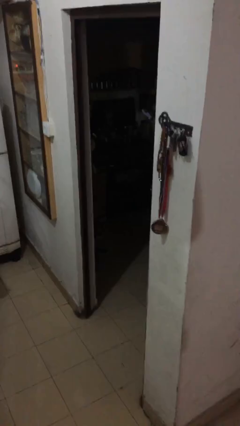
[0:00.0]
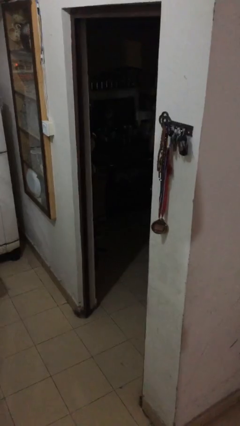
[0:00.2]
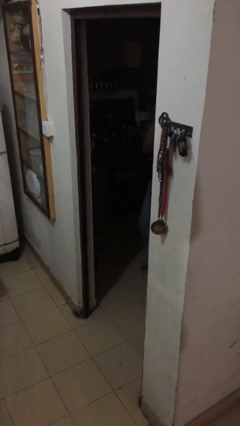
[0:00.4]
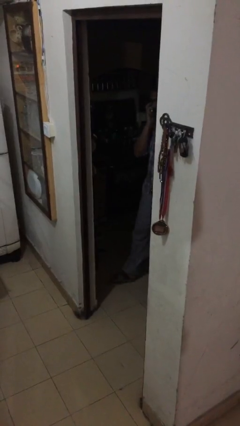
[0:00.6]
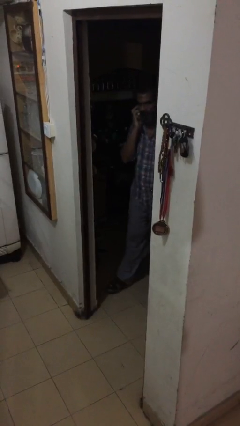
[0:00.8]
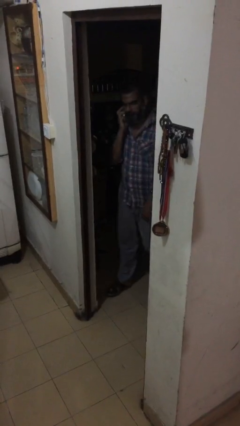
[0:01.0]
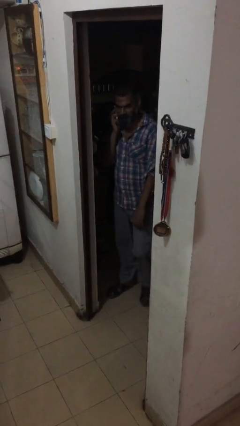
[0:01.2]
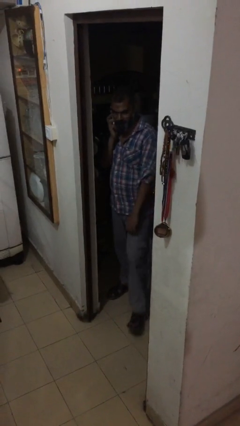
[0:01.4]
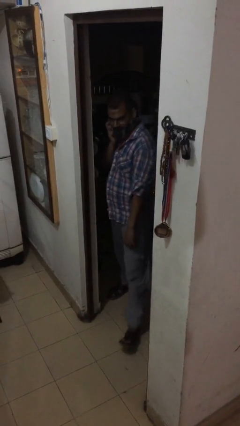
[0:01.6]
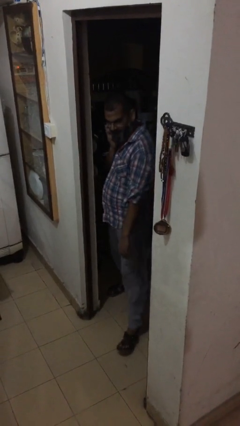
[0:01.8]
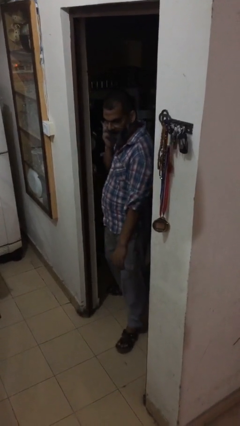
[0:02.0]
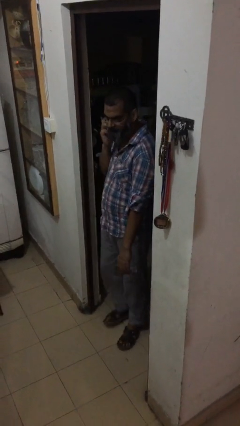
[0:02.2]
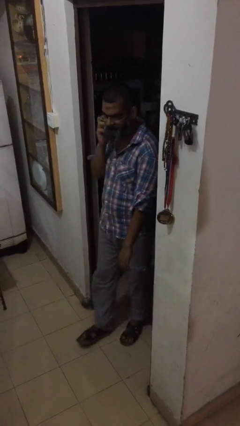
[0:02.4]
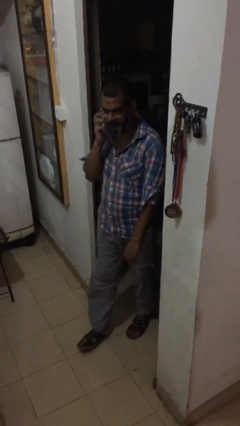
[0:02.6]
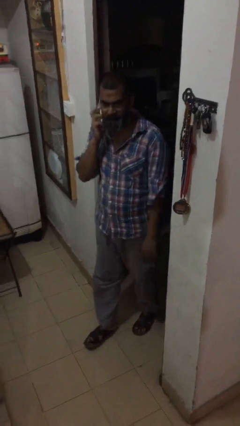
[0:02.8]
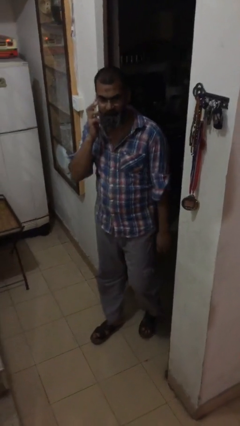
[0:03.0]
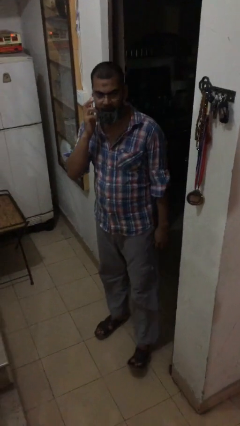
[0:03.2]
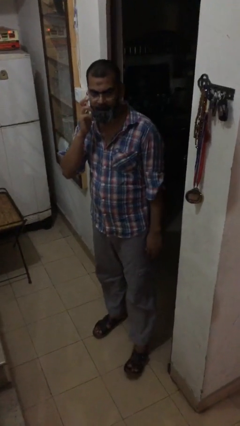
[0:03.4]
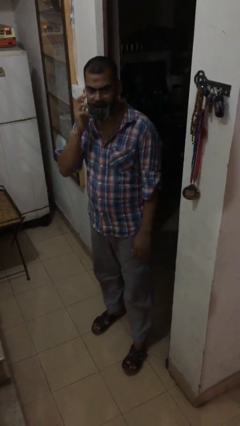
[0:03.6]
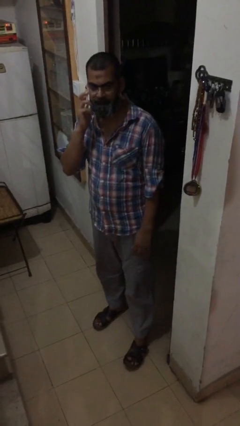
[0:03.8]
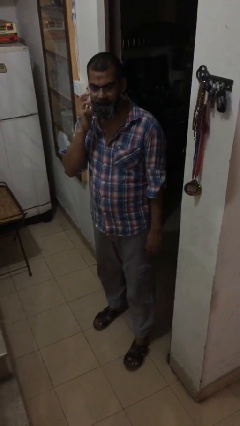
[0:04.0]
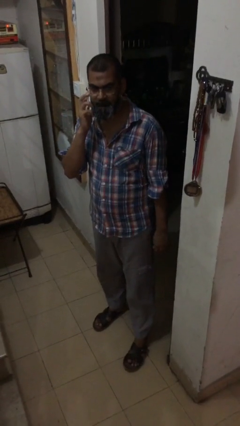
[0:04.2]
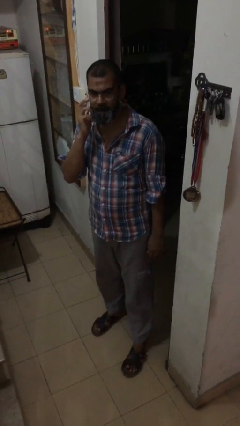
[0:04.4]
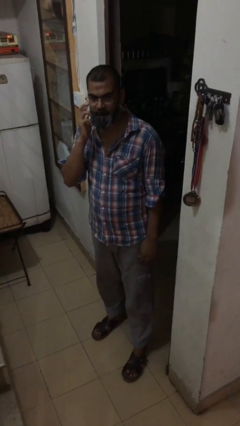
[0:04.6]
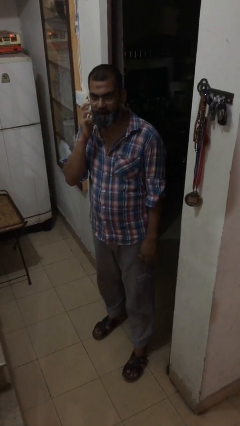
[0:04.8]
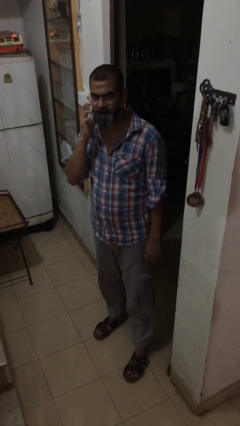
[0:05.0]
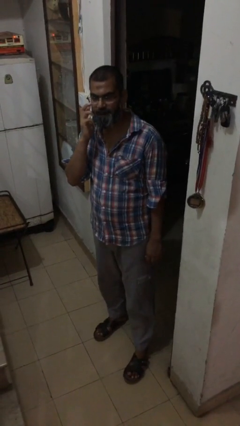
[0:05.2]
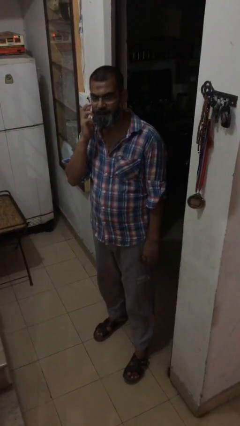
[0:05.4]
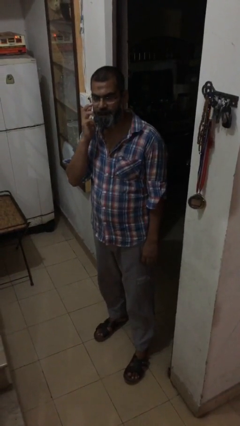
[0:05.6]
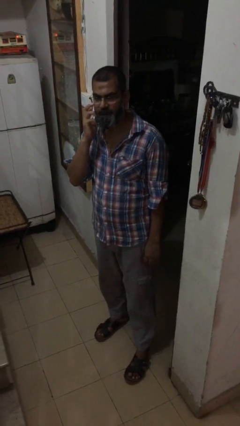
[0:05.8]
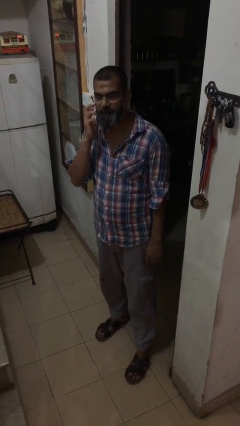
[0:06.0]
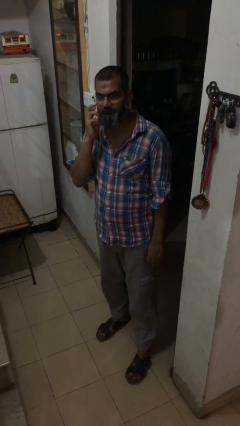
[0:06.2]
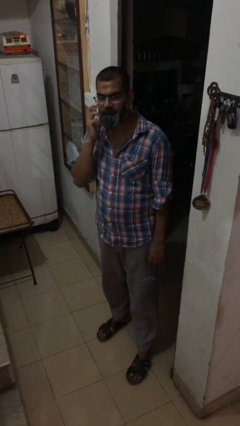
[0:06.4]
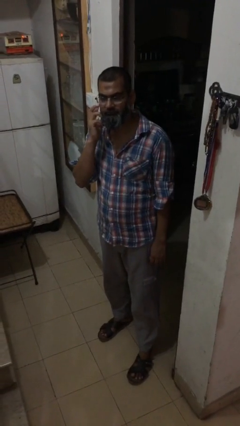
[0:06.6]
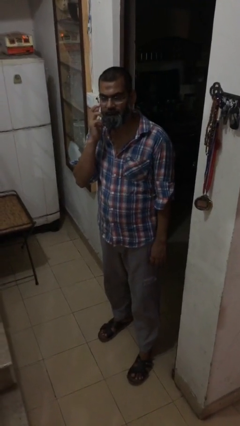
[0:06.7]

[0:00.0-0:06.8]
person enters scene through structure

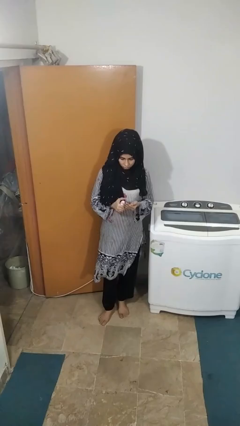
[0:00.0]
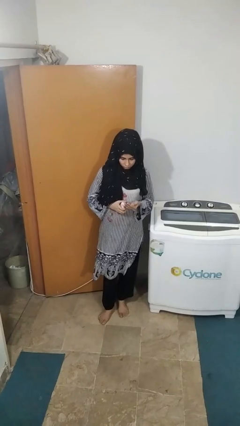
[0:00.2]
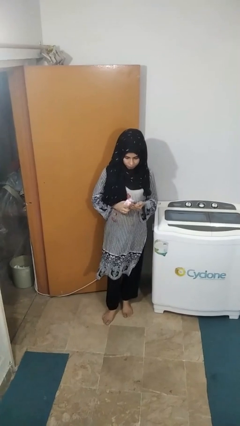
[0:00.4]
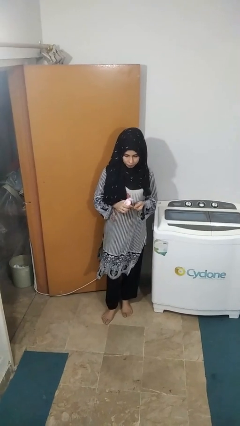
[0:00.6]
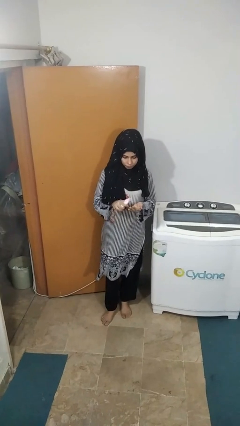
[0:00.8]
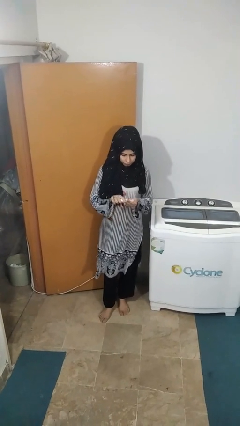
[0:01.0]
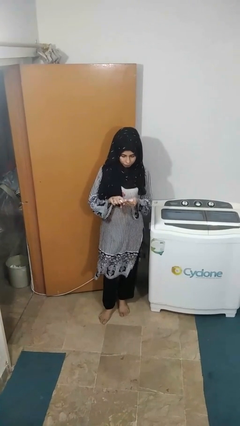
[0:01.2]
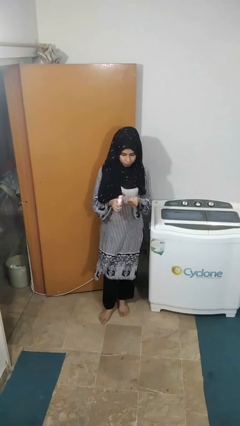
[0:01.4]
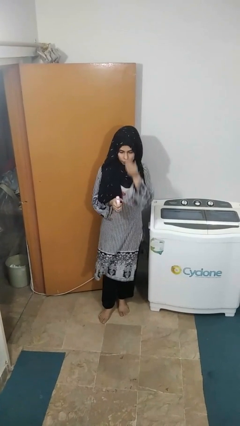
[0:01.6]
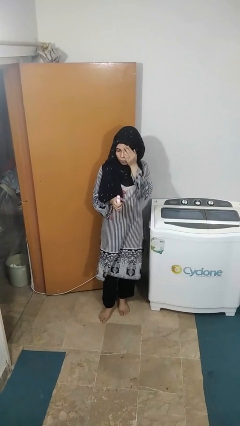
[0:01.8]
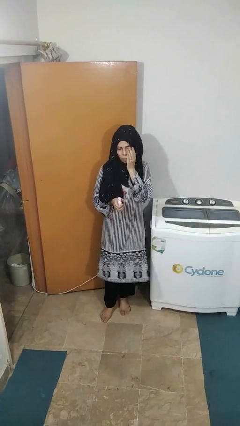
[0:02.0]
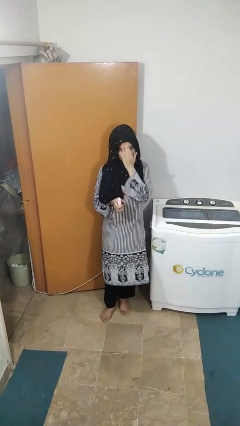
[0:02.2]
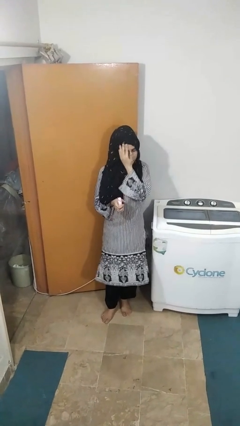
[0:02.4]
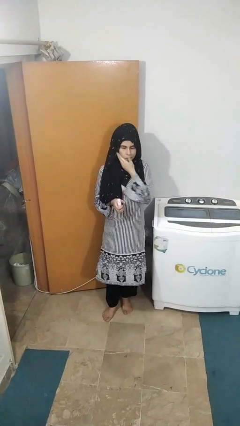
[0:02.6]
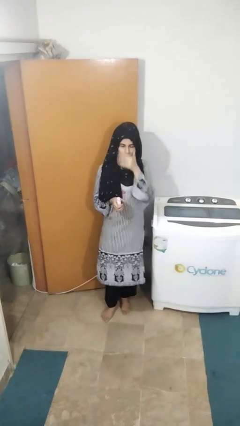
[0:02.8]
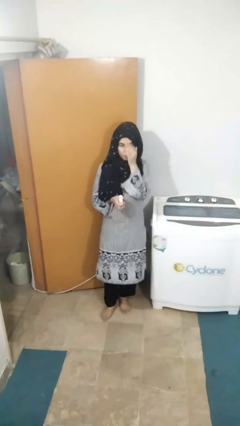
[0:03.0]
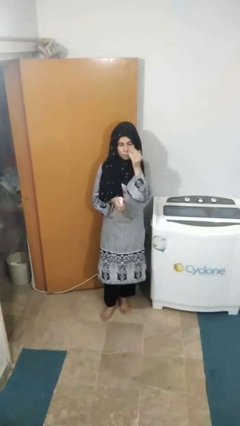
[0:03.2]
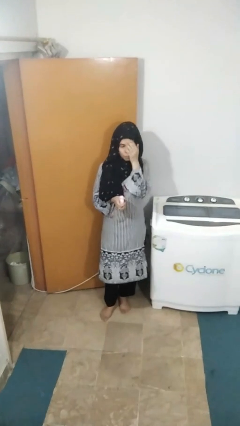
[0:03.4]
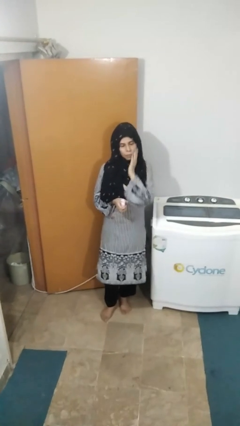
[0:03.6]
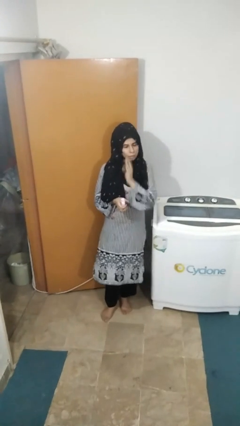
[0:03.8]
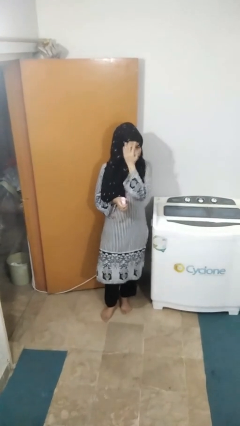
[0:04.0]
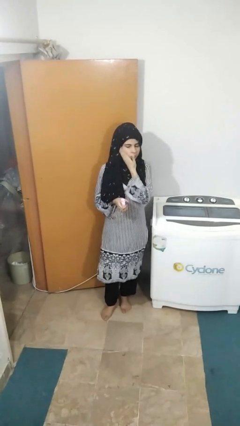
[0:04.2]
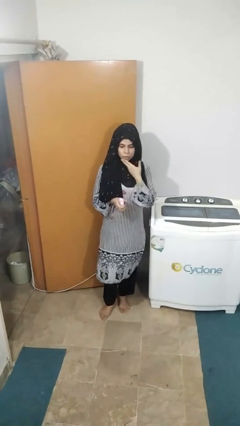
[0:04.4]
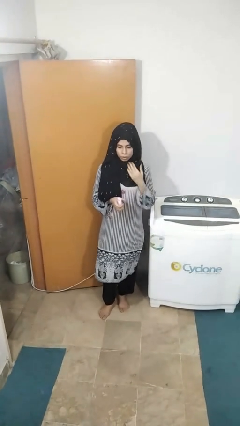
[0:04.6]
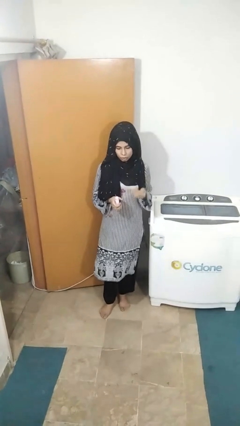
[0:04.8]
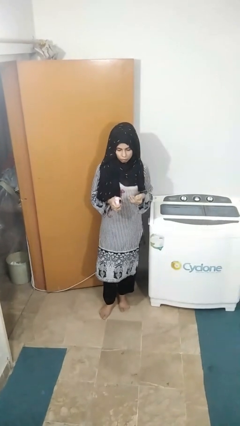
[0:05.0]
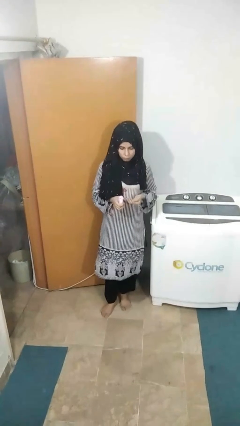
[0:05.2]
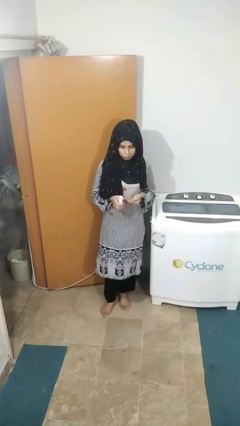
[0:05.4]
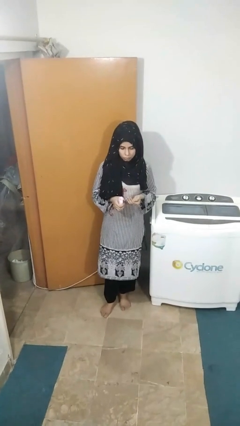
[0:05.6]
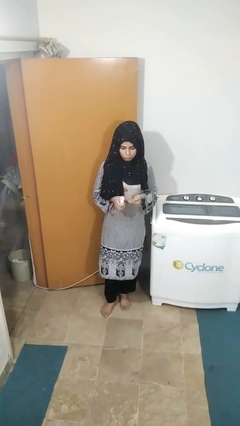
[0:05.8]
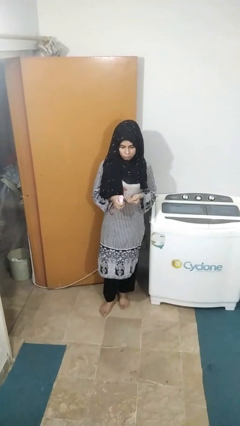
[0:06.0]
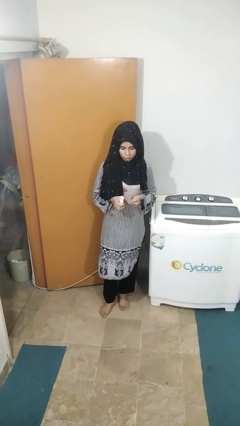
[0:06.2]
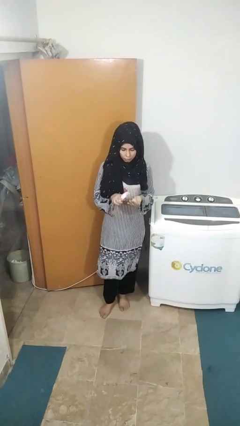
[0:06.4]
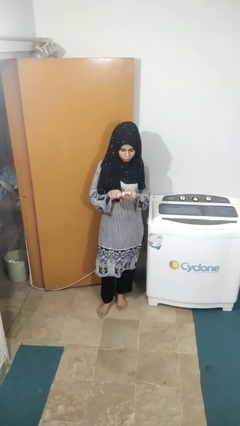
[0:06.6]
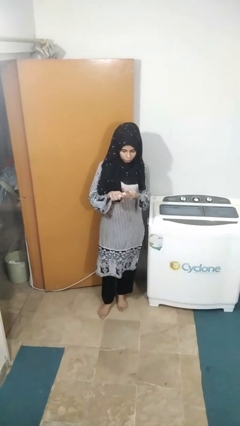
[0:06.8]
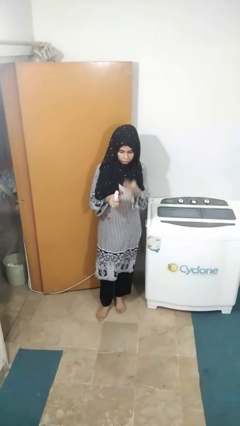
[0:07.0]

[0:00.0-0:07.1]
person lights candle

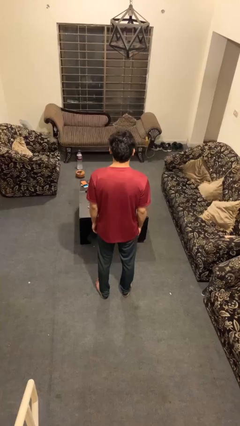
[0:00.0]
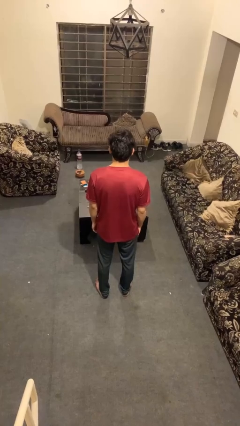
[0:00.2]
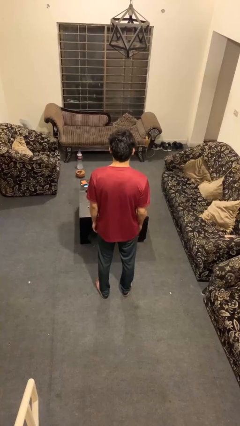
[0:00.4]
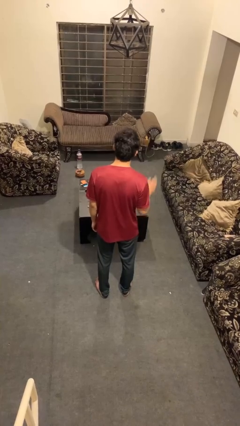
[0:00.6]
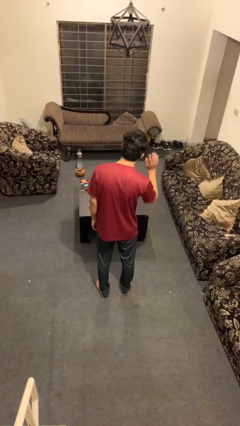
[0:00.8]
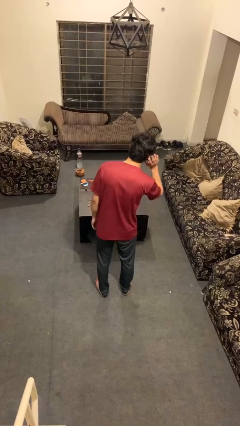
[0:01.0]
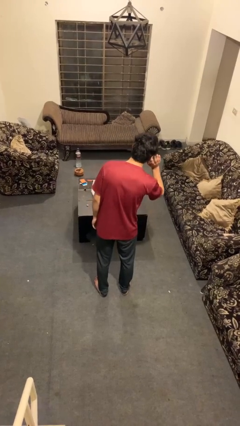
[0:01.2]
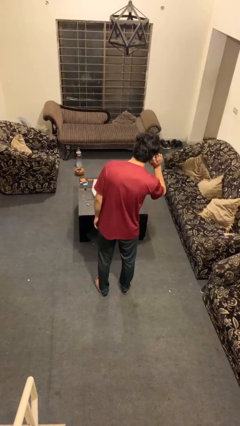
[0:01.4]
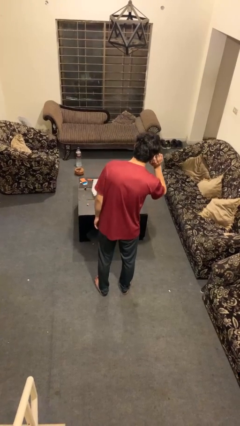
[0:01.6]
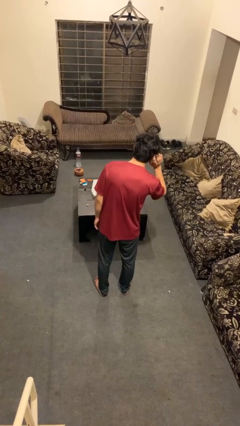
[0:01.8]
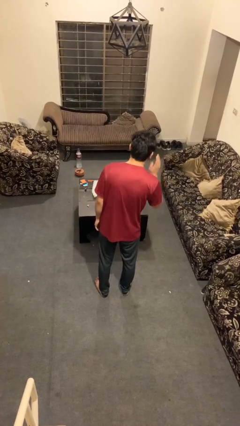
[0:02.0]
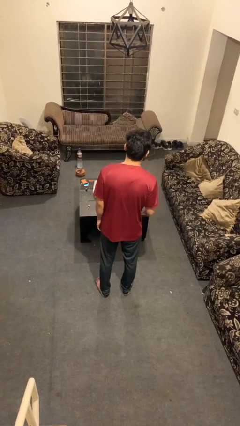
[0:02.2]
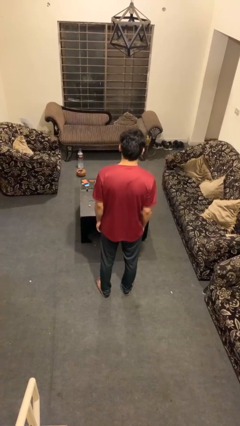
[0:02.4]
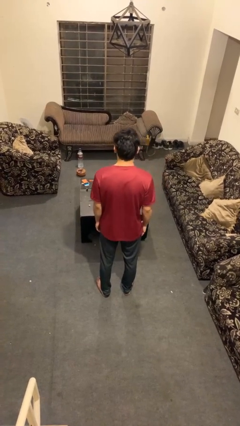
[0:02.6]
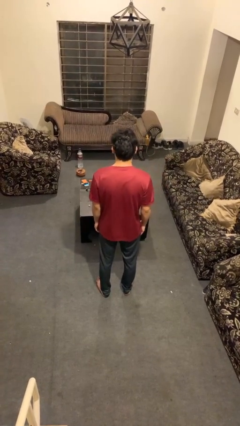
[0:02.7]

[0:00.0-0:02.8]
person gestures listen closely

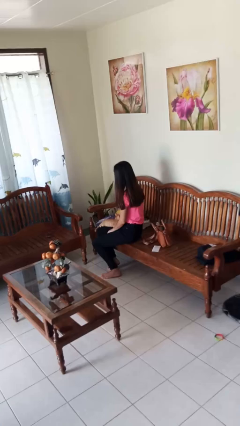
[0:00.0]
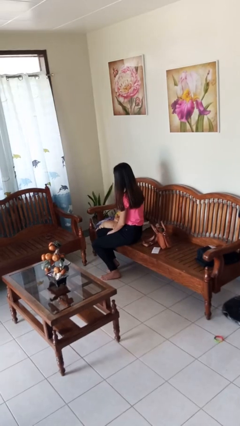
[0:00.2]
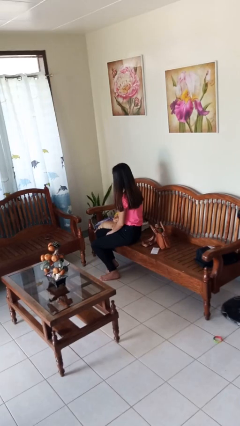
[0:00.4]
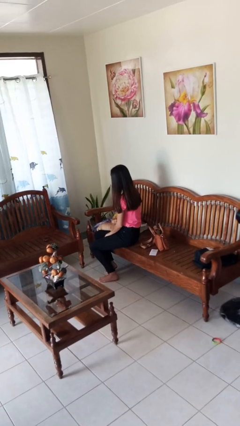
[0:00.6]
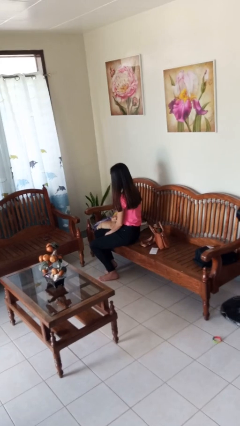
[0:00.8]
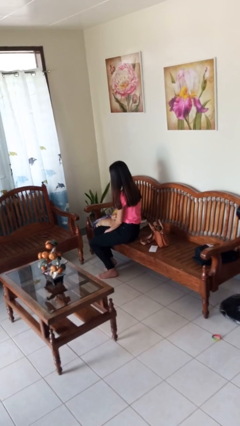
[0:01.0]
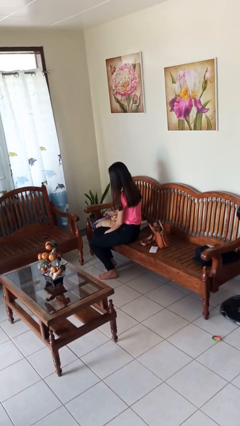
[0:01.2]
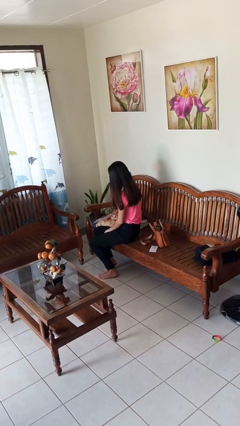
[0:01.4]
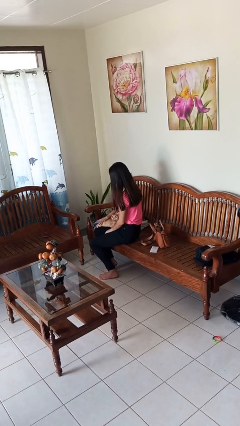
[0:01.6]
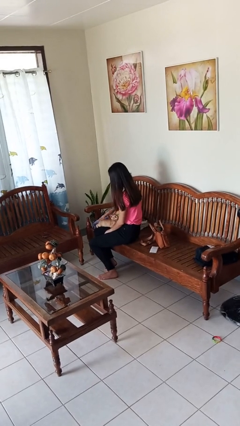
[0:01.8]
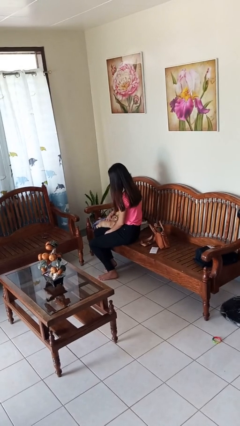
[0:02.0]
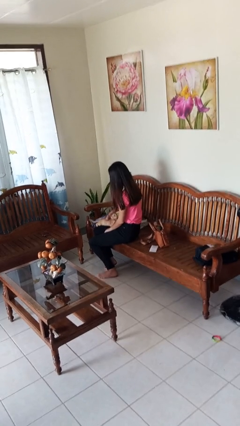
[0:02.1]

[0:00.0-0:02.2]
person pets cat
